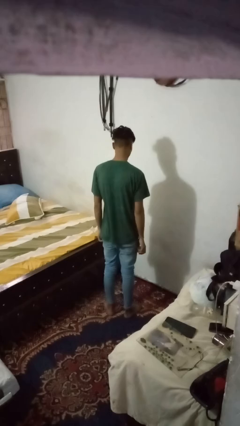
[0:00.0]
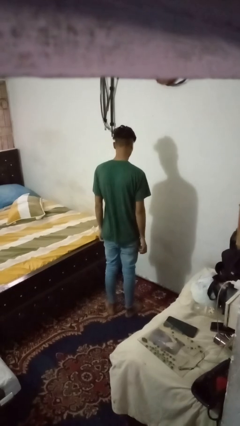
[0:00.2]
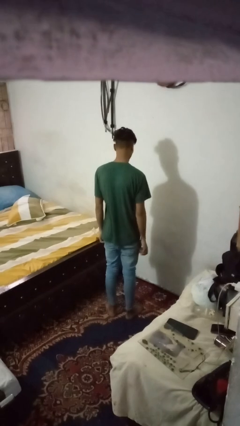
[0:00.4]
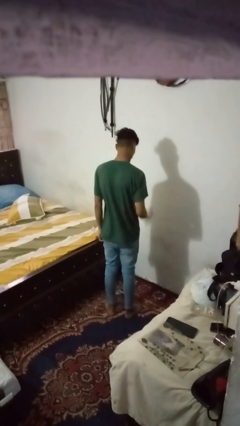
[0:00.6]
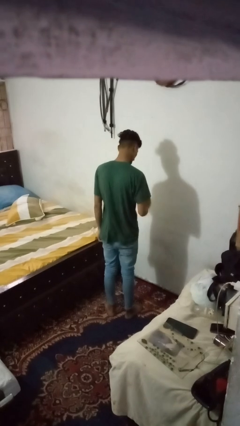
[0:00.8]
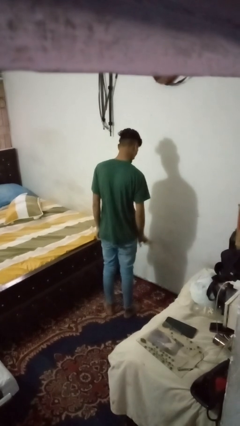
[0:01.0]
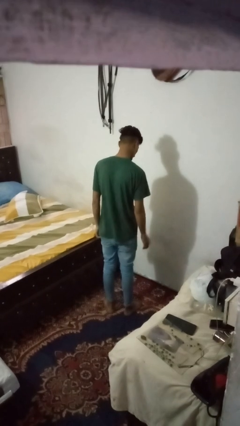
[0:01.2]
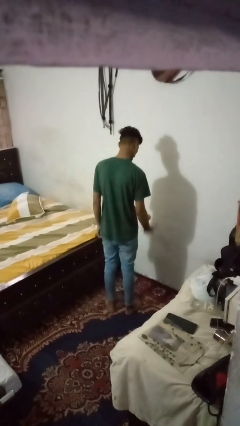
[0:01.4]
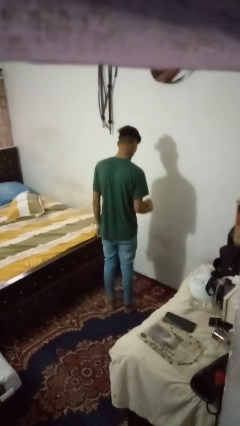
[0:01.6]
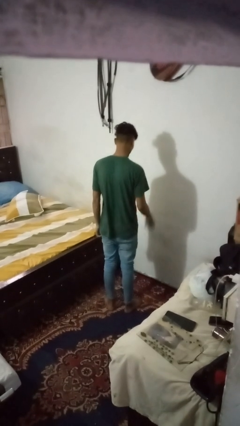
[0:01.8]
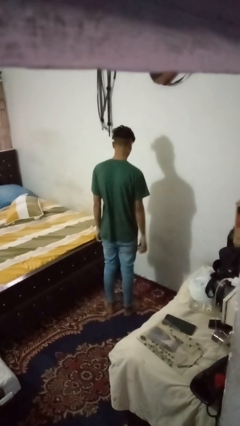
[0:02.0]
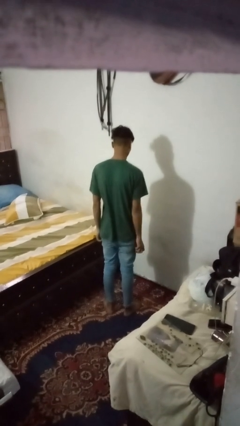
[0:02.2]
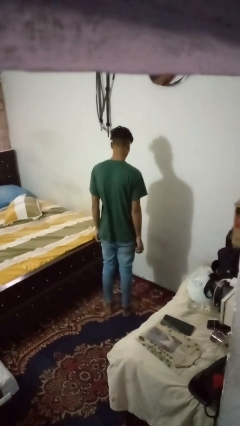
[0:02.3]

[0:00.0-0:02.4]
person bounces ball on floor

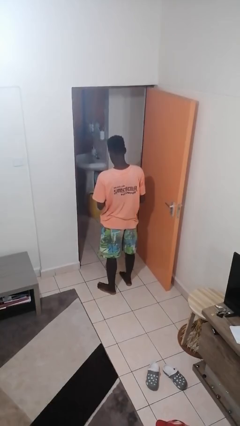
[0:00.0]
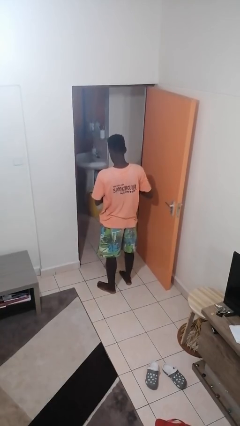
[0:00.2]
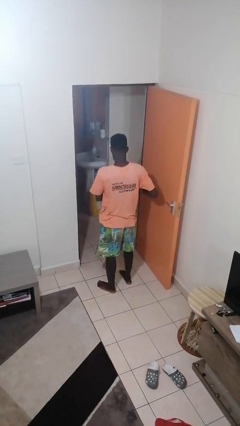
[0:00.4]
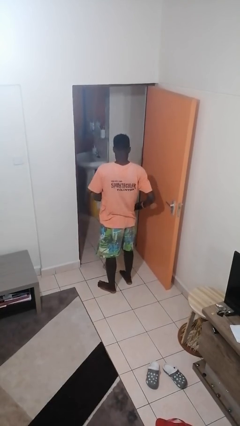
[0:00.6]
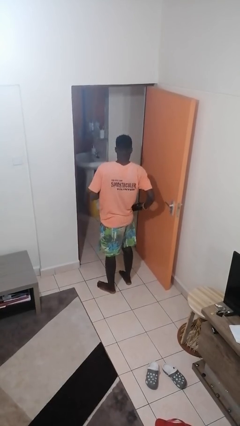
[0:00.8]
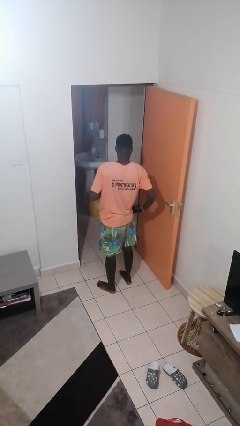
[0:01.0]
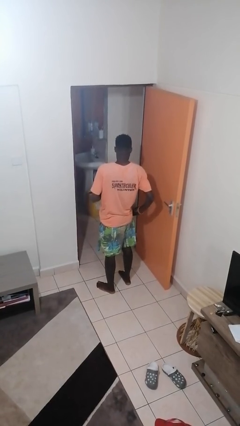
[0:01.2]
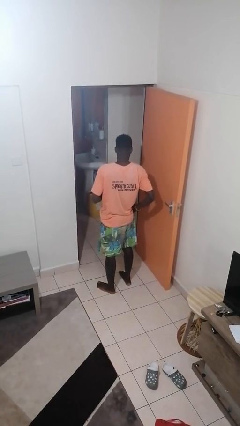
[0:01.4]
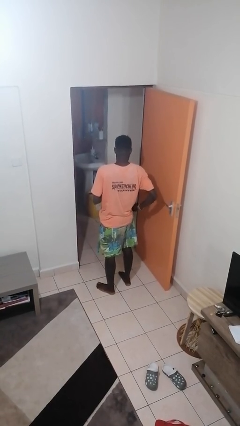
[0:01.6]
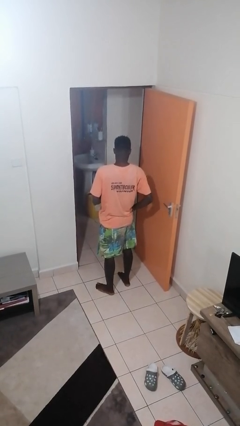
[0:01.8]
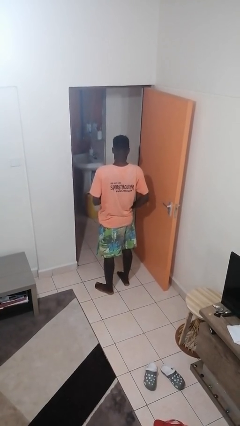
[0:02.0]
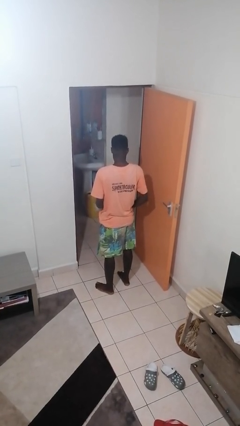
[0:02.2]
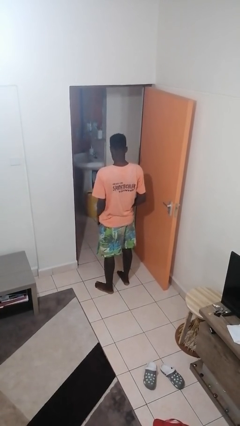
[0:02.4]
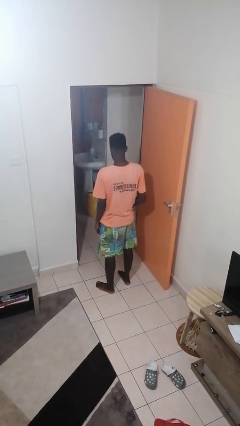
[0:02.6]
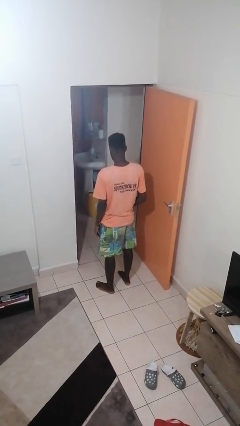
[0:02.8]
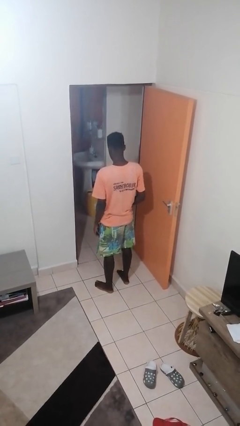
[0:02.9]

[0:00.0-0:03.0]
person puts phone into pocket

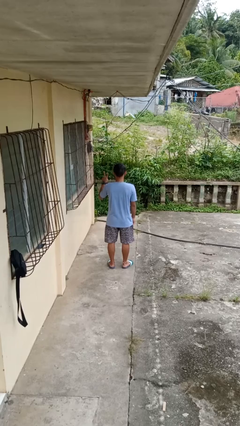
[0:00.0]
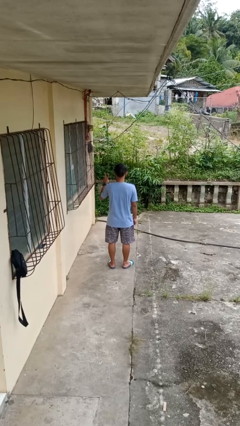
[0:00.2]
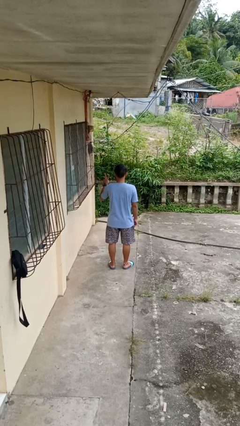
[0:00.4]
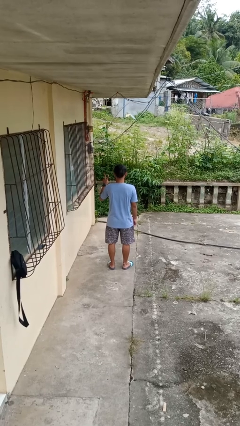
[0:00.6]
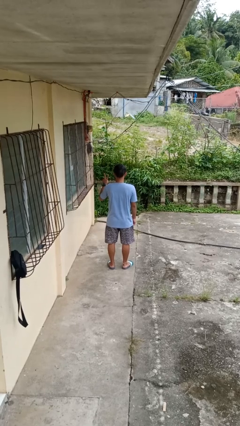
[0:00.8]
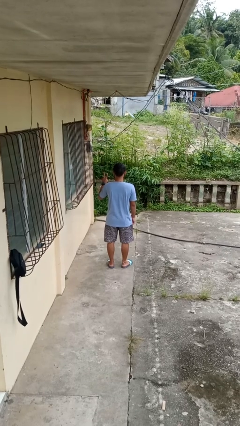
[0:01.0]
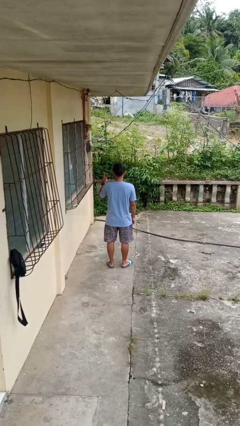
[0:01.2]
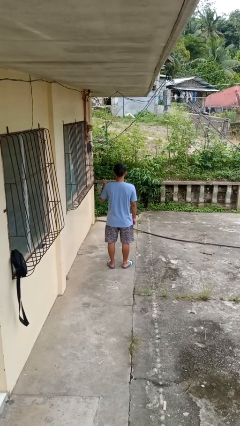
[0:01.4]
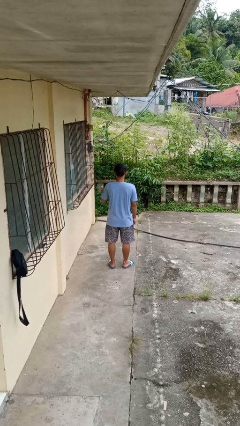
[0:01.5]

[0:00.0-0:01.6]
person gestures peace

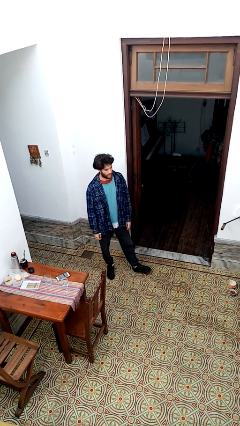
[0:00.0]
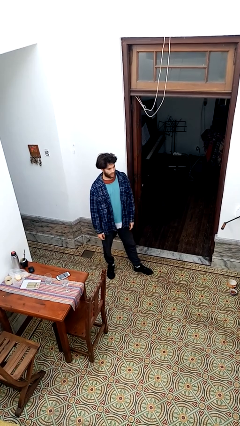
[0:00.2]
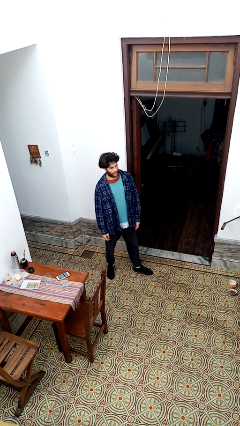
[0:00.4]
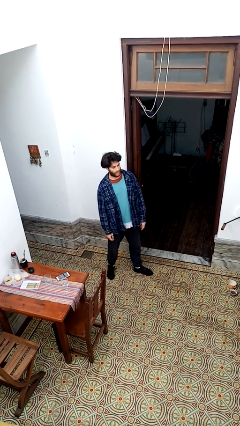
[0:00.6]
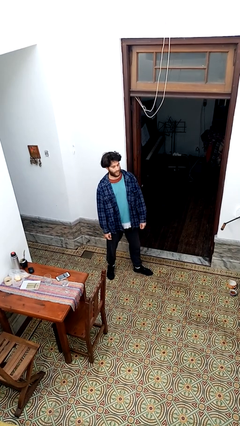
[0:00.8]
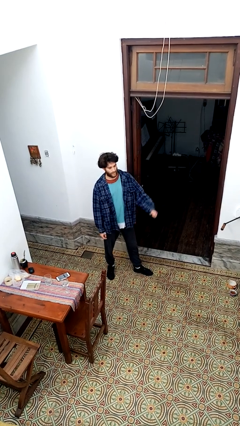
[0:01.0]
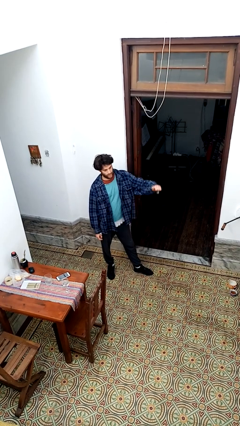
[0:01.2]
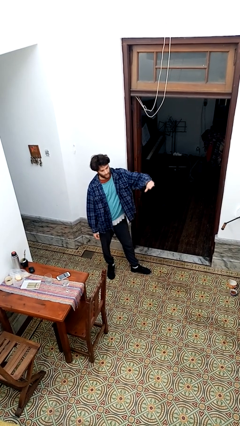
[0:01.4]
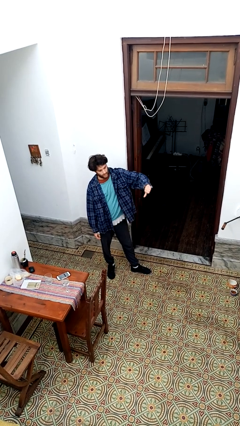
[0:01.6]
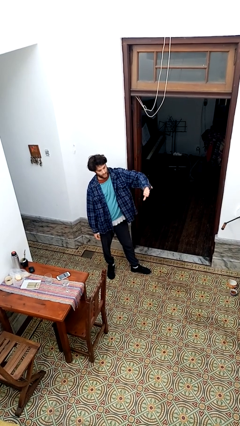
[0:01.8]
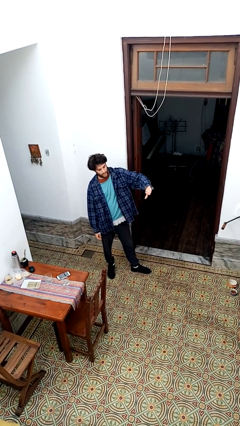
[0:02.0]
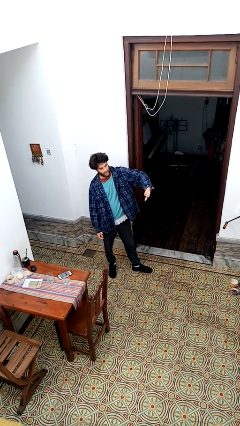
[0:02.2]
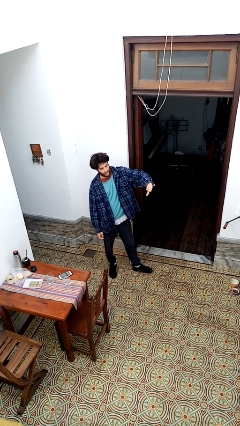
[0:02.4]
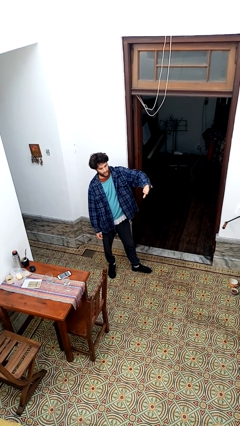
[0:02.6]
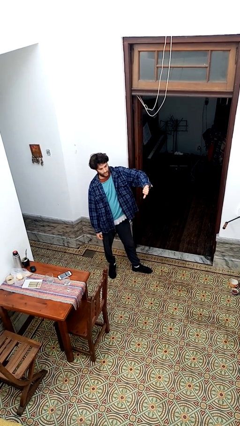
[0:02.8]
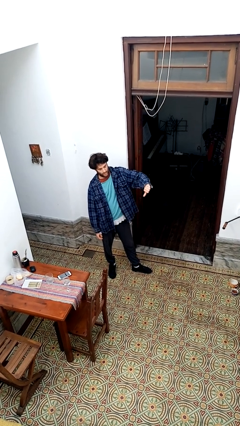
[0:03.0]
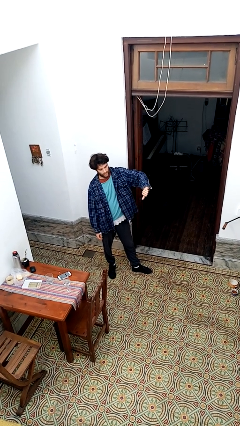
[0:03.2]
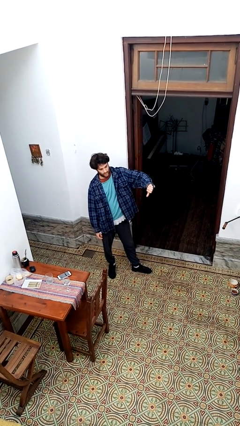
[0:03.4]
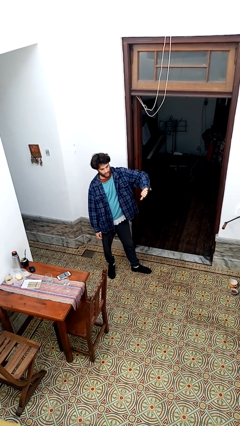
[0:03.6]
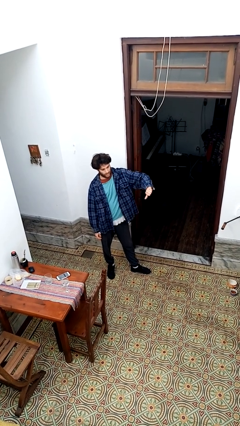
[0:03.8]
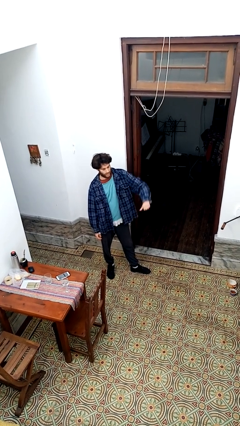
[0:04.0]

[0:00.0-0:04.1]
person gestures thumbs down

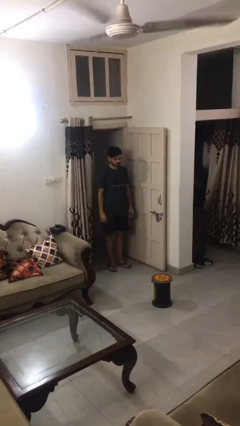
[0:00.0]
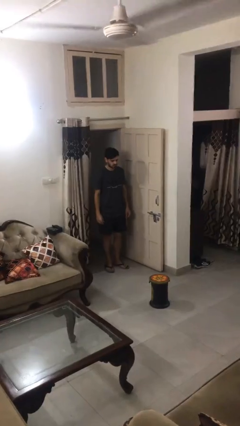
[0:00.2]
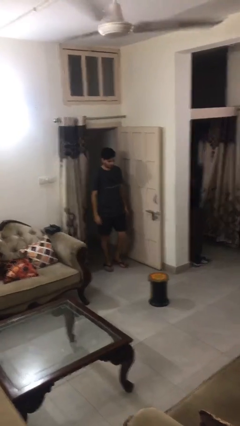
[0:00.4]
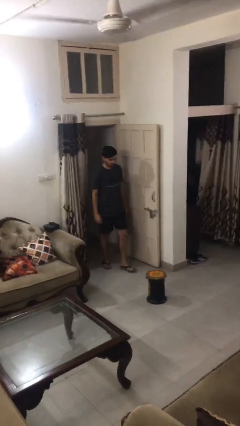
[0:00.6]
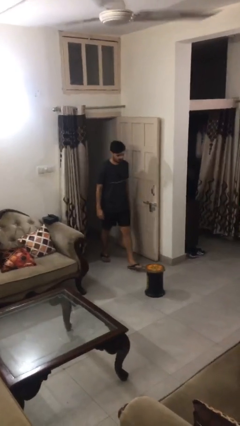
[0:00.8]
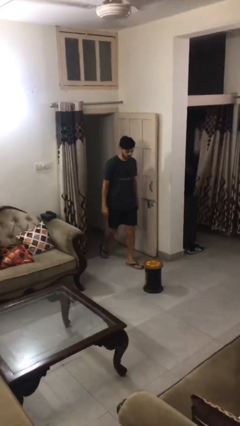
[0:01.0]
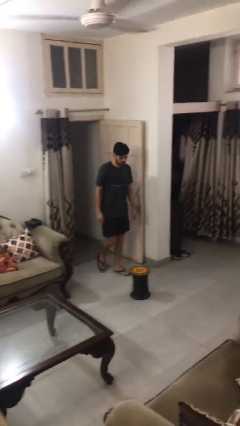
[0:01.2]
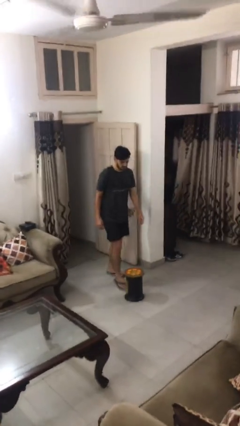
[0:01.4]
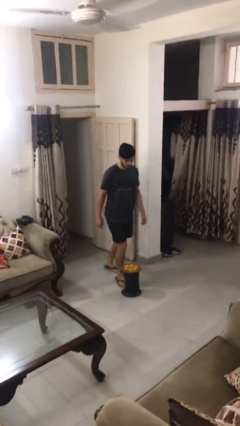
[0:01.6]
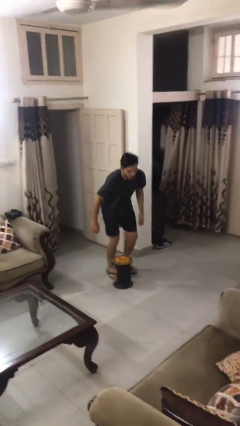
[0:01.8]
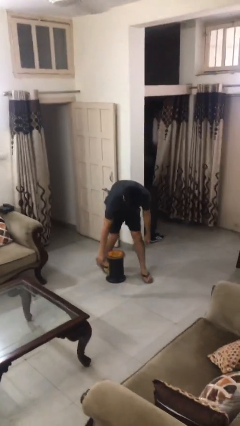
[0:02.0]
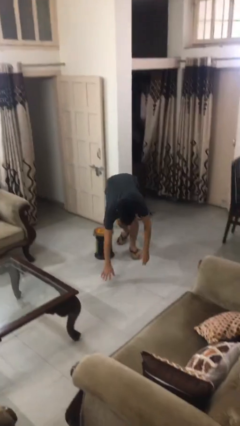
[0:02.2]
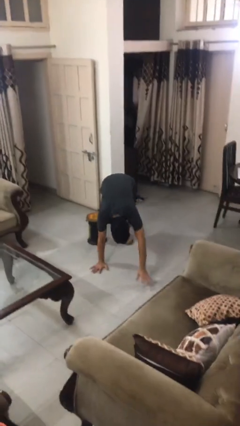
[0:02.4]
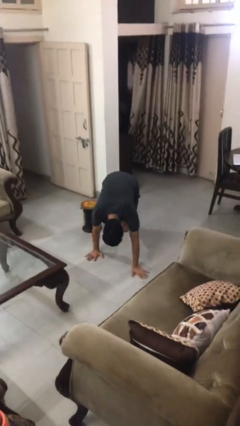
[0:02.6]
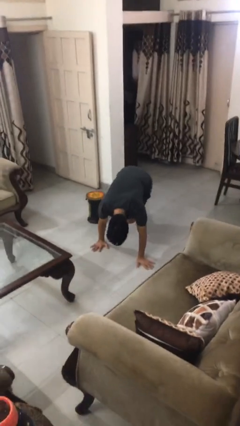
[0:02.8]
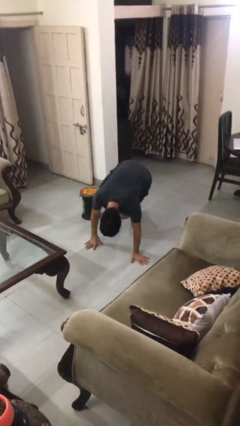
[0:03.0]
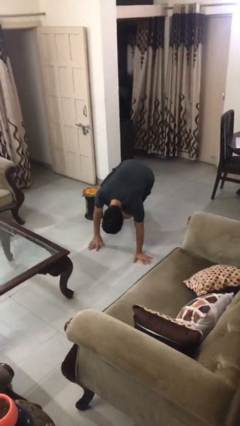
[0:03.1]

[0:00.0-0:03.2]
person trips on object on floor

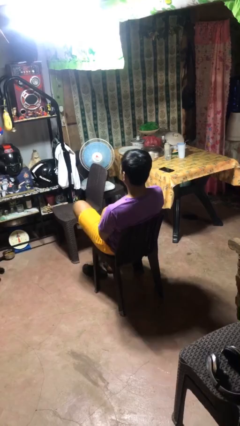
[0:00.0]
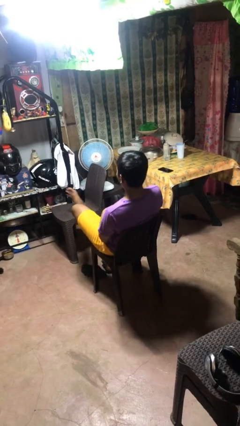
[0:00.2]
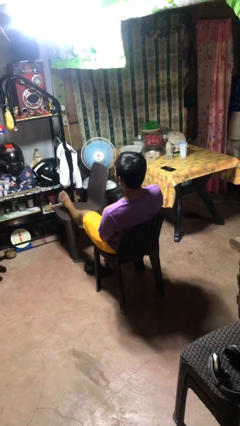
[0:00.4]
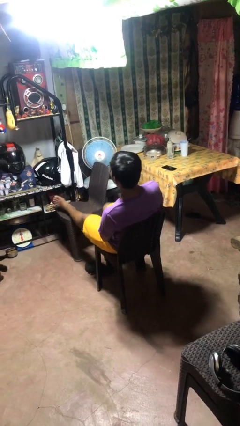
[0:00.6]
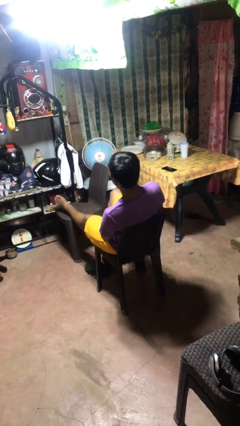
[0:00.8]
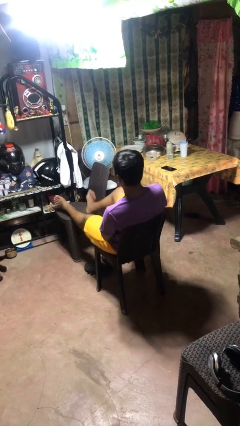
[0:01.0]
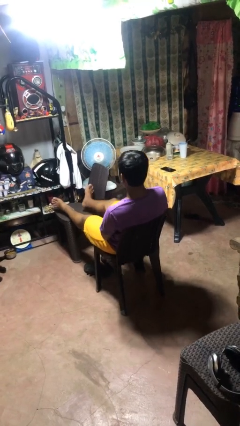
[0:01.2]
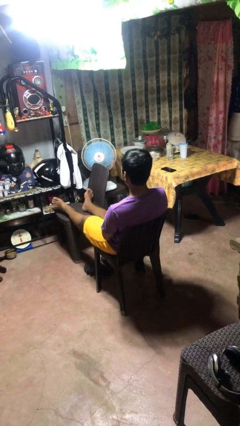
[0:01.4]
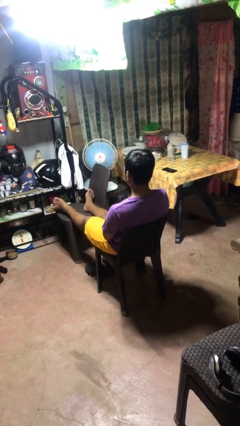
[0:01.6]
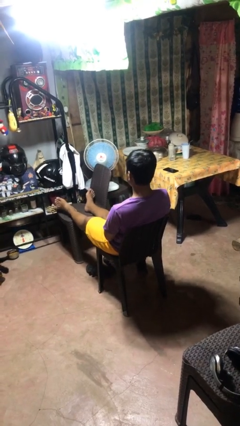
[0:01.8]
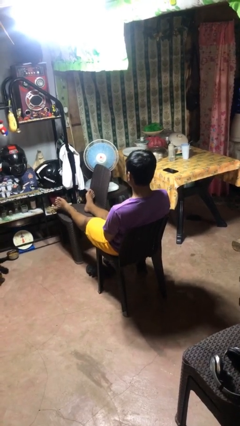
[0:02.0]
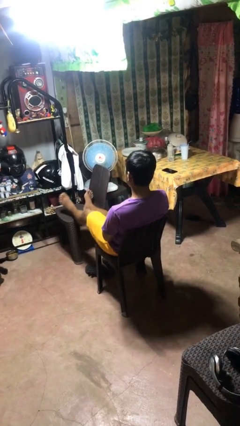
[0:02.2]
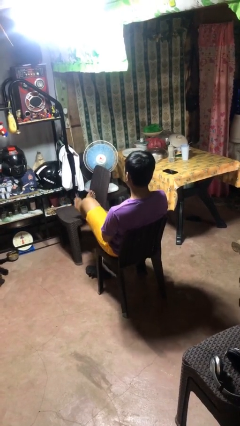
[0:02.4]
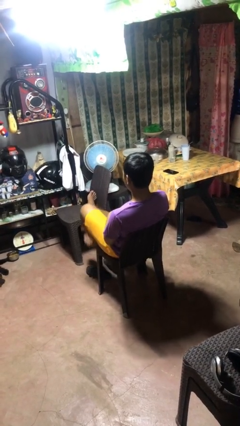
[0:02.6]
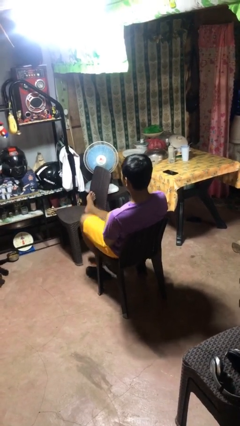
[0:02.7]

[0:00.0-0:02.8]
person puts feet up

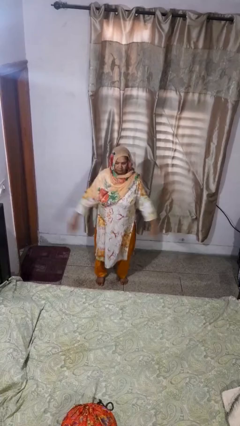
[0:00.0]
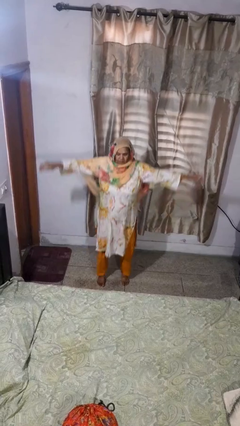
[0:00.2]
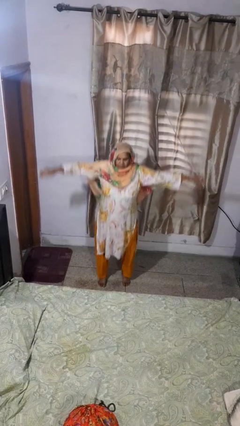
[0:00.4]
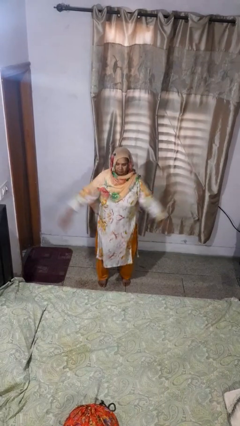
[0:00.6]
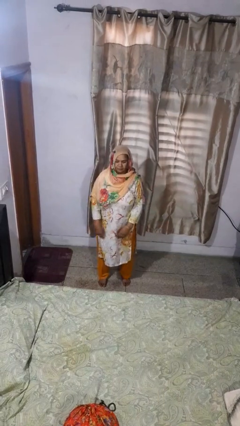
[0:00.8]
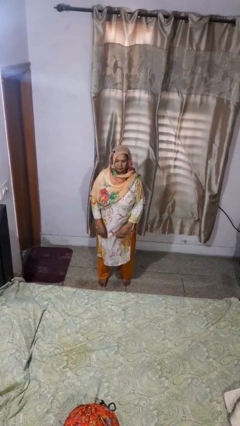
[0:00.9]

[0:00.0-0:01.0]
person jumps
